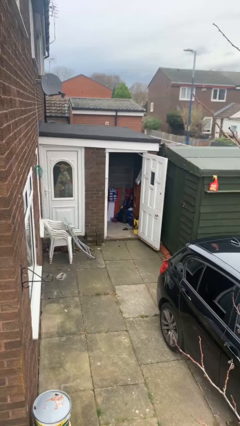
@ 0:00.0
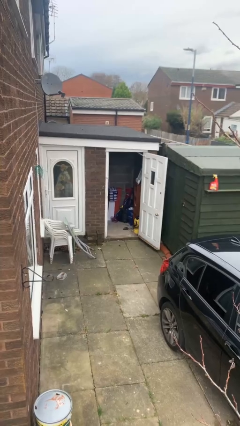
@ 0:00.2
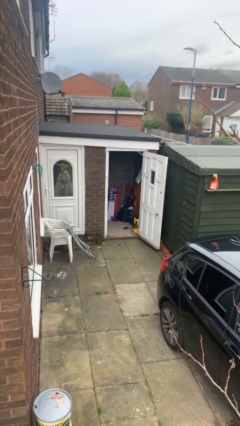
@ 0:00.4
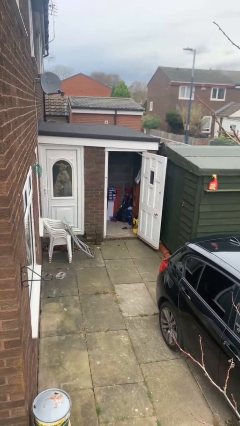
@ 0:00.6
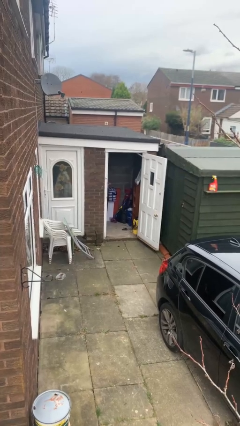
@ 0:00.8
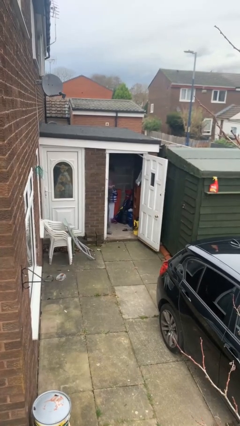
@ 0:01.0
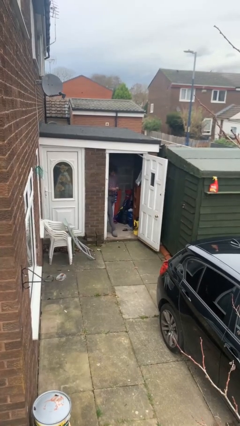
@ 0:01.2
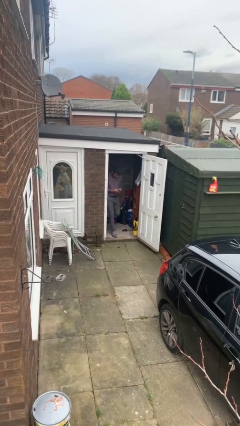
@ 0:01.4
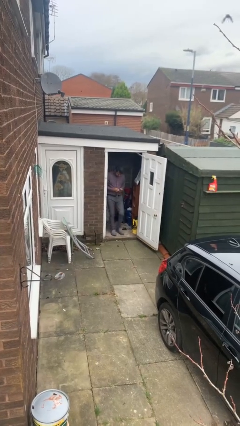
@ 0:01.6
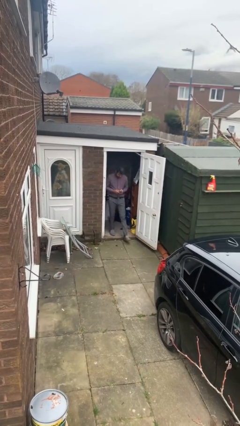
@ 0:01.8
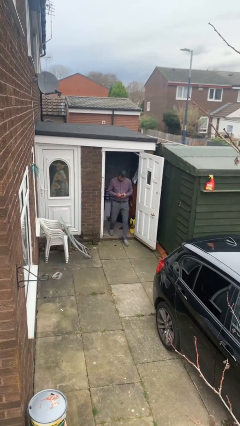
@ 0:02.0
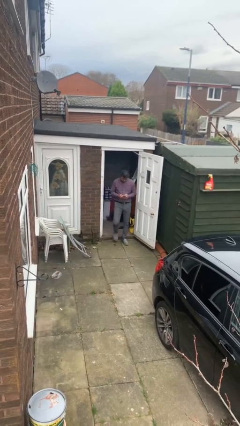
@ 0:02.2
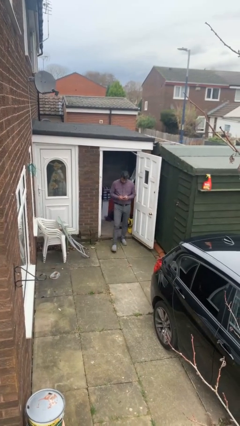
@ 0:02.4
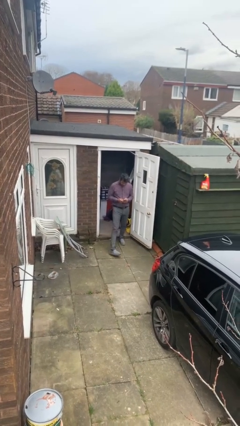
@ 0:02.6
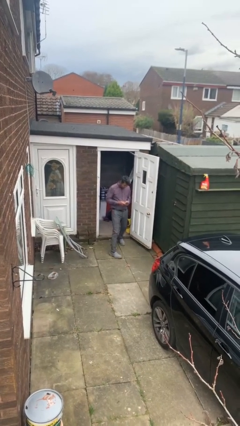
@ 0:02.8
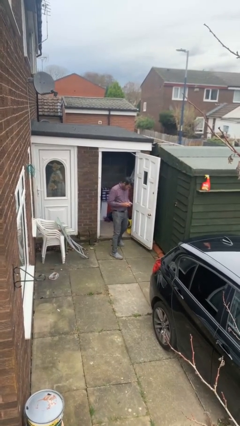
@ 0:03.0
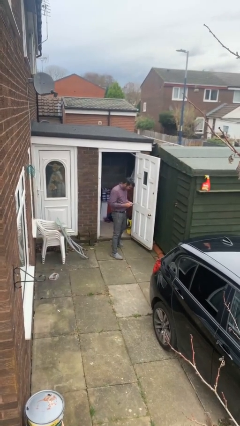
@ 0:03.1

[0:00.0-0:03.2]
person enters scene through structure

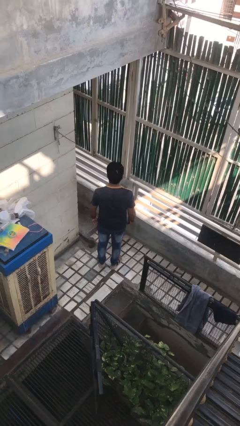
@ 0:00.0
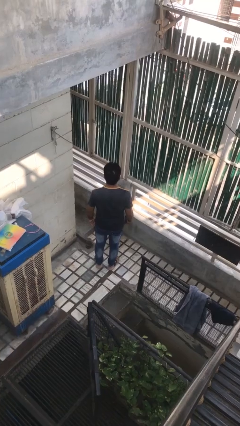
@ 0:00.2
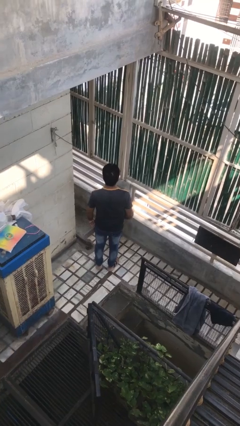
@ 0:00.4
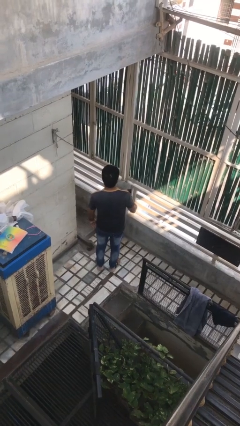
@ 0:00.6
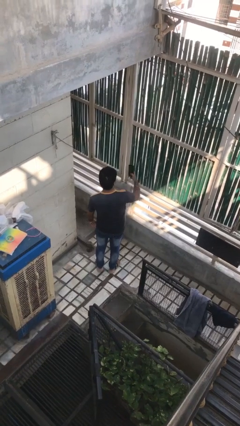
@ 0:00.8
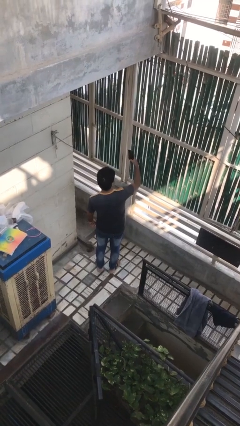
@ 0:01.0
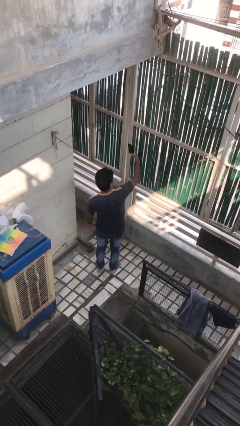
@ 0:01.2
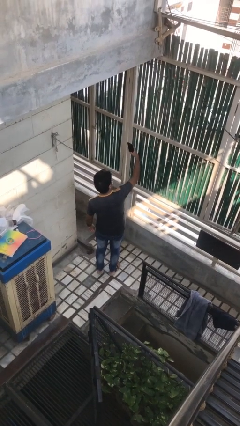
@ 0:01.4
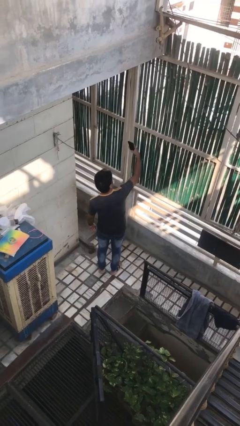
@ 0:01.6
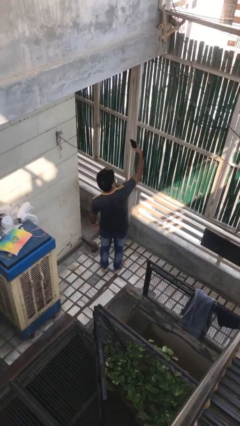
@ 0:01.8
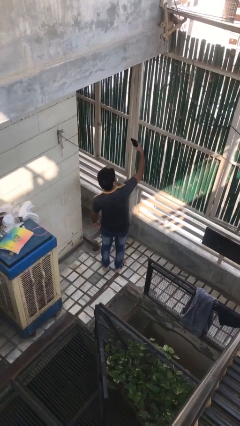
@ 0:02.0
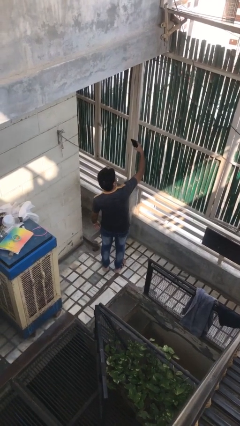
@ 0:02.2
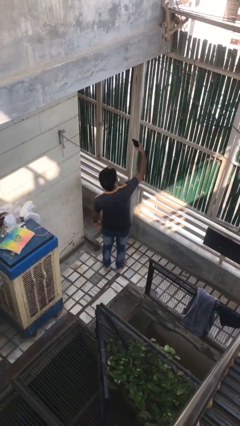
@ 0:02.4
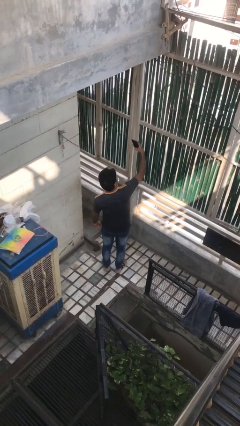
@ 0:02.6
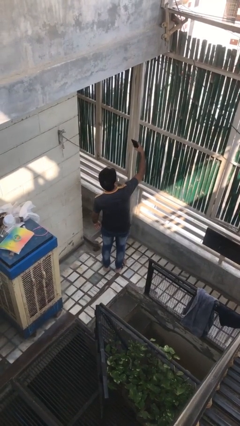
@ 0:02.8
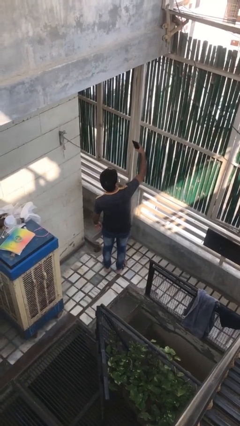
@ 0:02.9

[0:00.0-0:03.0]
person takes selfie

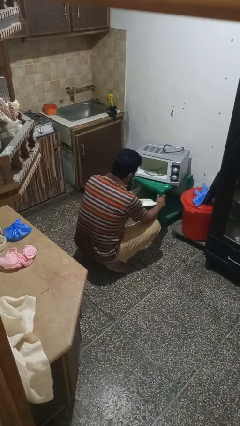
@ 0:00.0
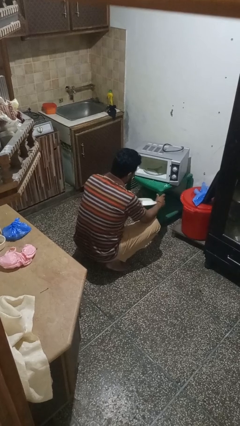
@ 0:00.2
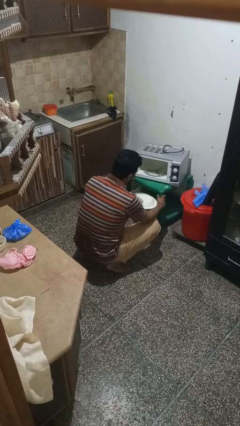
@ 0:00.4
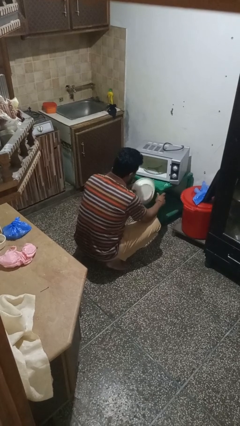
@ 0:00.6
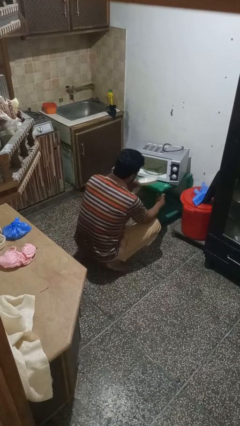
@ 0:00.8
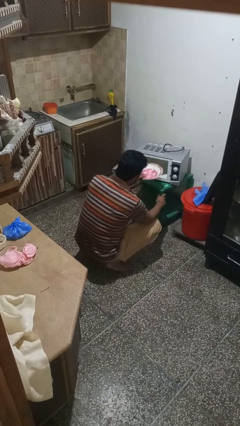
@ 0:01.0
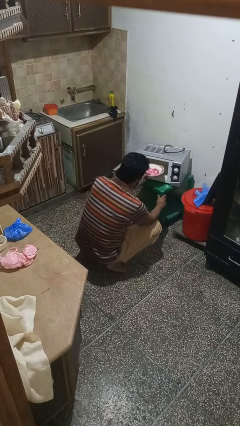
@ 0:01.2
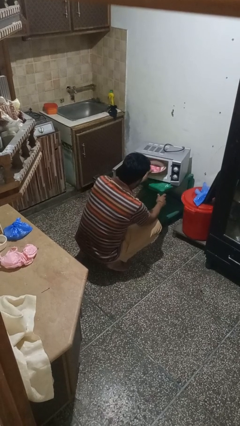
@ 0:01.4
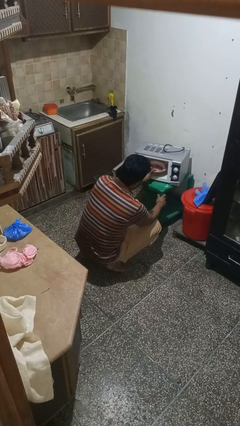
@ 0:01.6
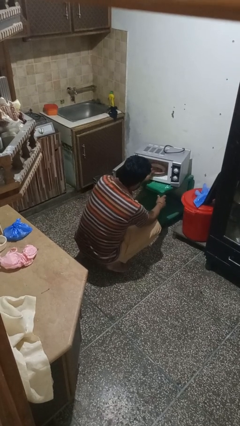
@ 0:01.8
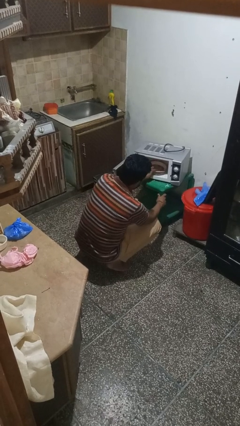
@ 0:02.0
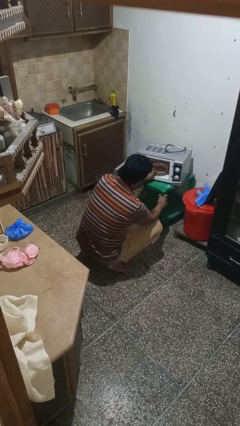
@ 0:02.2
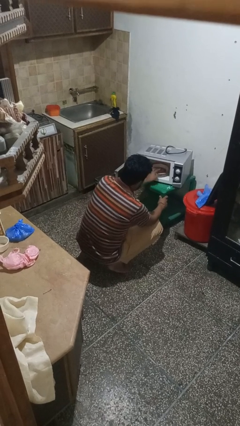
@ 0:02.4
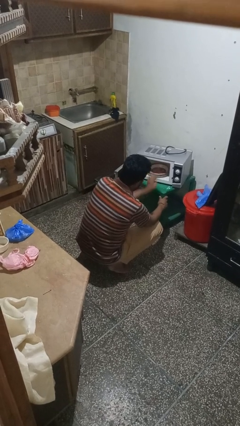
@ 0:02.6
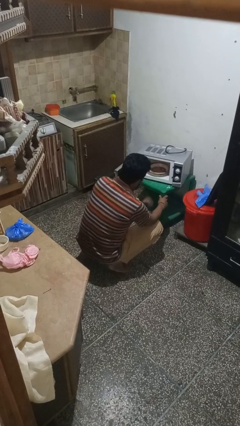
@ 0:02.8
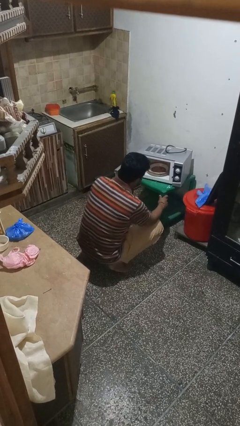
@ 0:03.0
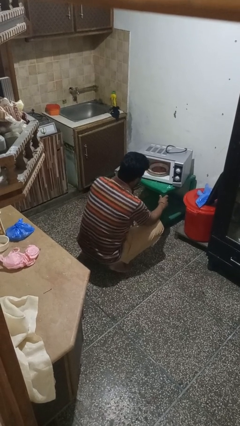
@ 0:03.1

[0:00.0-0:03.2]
person puts object into microwave

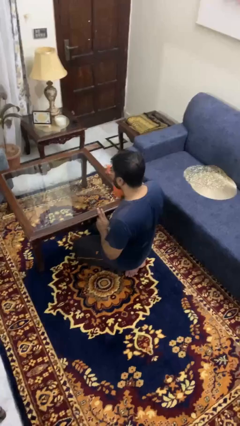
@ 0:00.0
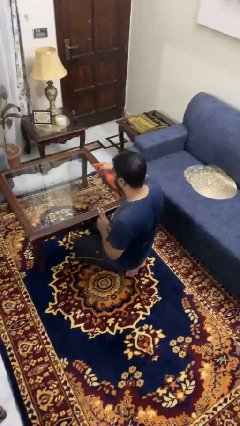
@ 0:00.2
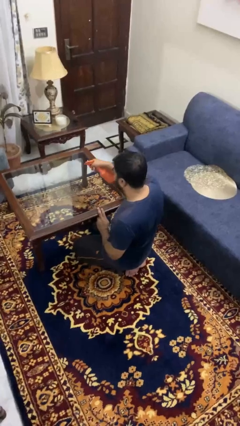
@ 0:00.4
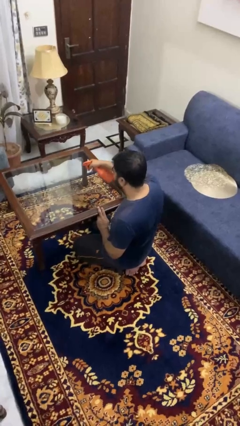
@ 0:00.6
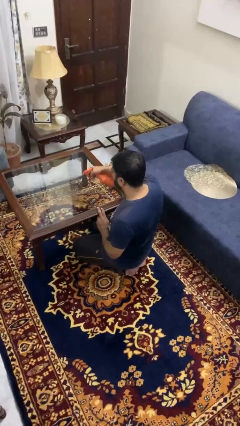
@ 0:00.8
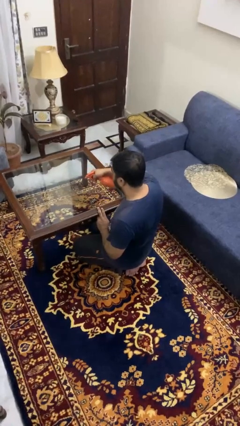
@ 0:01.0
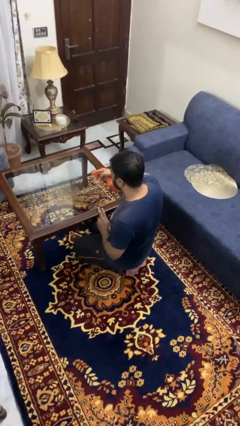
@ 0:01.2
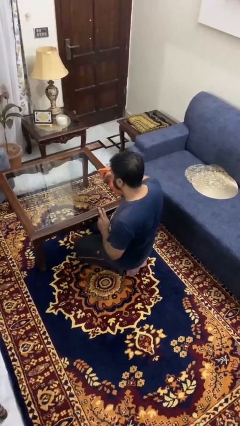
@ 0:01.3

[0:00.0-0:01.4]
person sprays from bottle

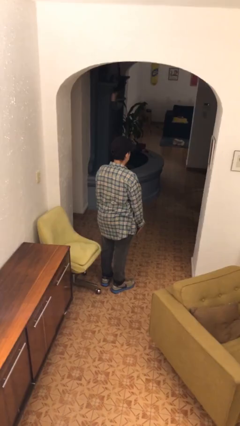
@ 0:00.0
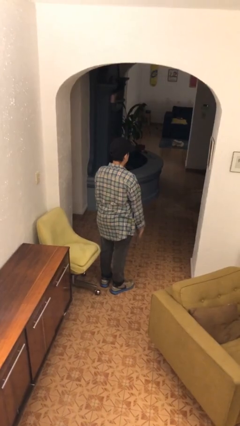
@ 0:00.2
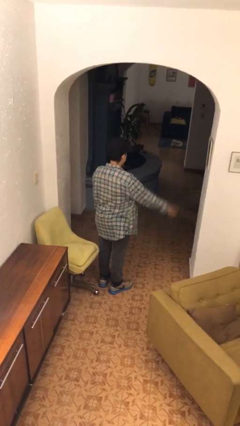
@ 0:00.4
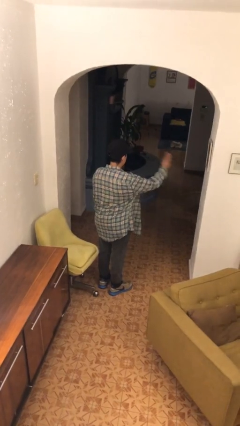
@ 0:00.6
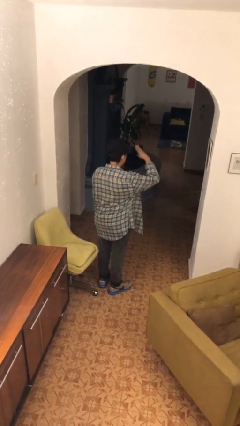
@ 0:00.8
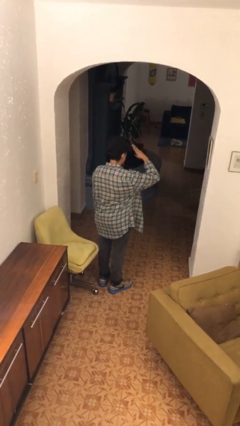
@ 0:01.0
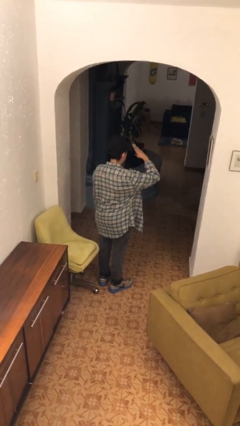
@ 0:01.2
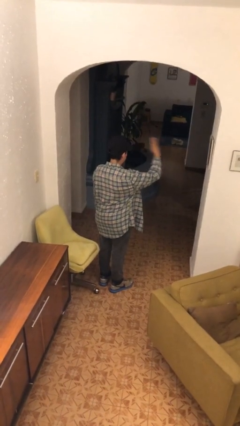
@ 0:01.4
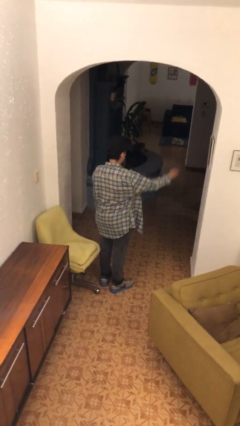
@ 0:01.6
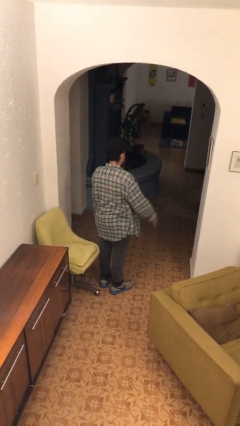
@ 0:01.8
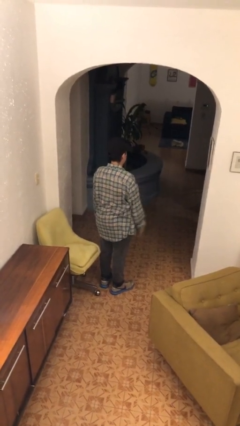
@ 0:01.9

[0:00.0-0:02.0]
person salutes

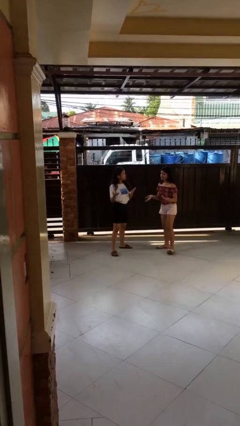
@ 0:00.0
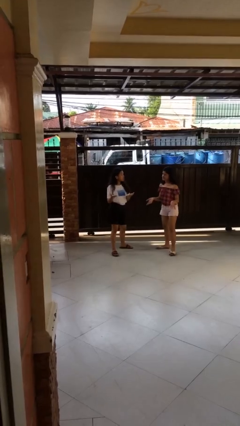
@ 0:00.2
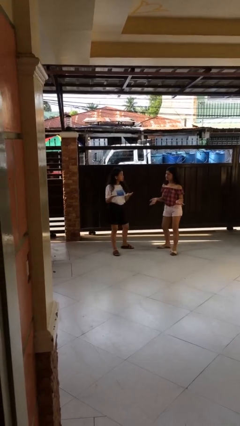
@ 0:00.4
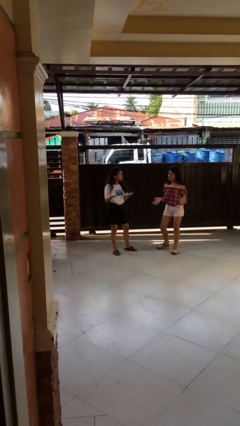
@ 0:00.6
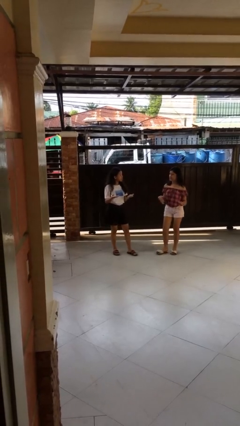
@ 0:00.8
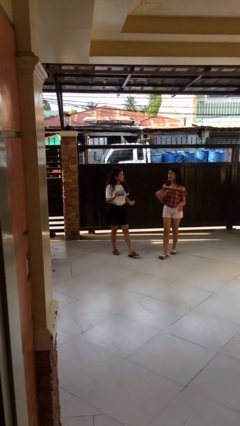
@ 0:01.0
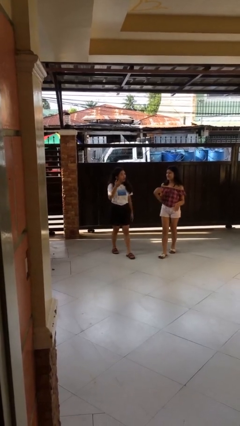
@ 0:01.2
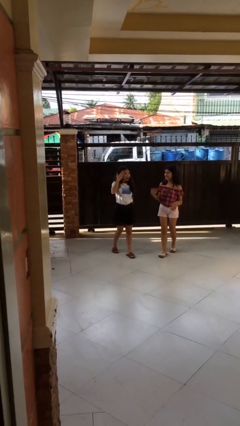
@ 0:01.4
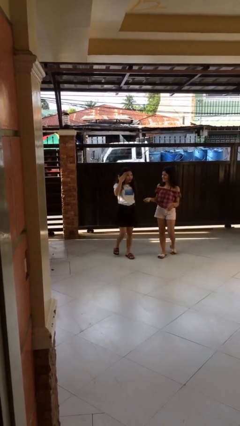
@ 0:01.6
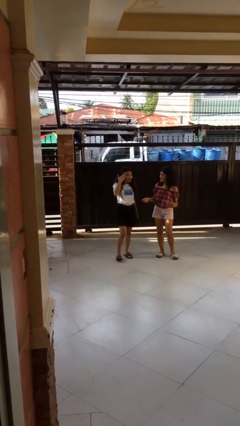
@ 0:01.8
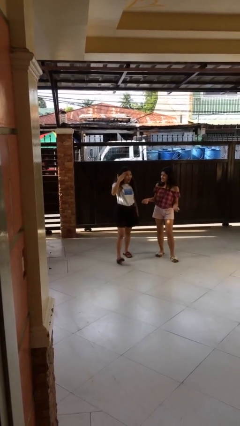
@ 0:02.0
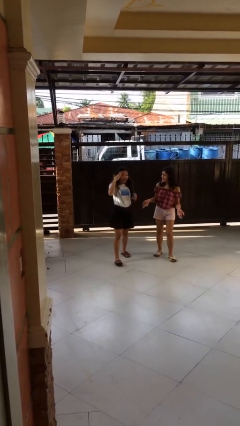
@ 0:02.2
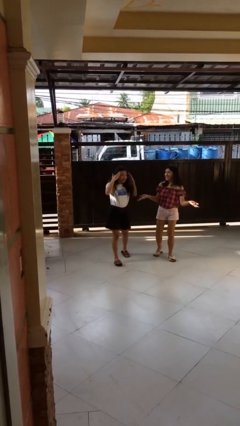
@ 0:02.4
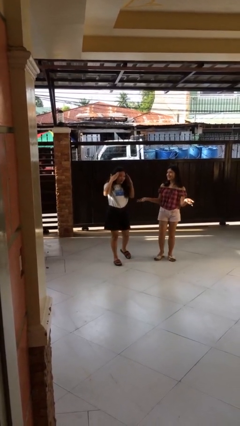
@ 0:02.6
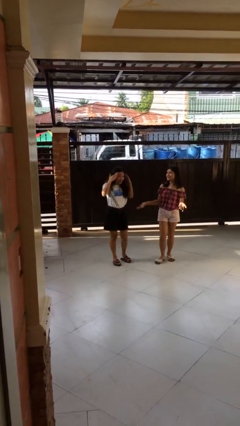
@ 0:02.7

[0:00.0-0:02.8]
person talks to person

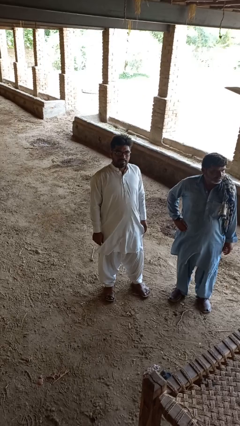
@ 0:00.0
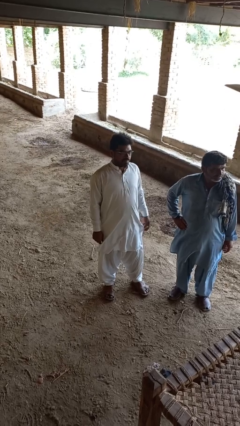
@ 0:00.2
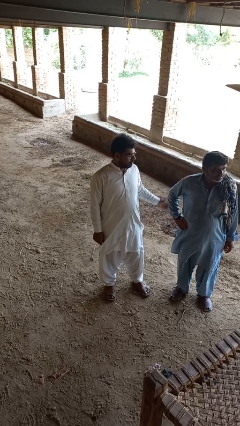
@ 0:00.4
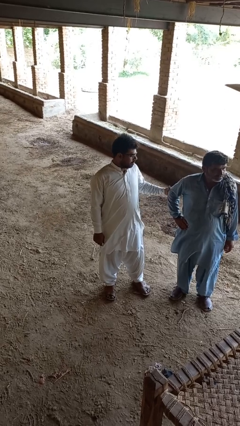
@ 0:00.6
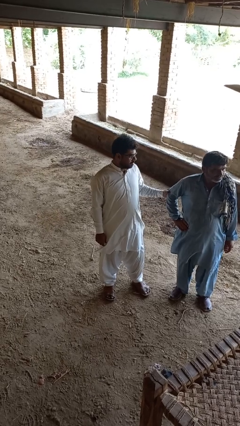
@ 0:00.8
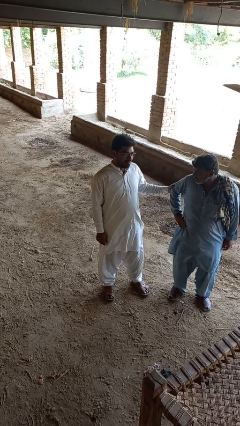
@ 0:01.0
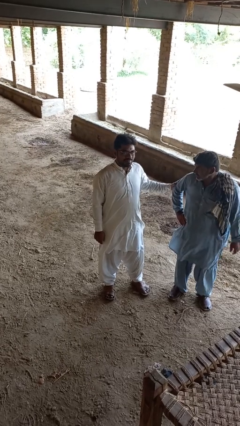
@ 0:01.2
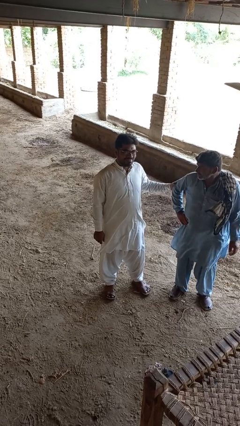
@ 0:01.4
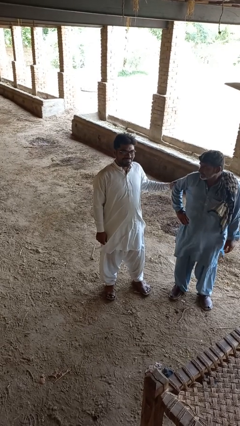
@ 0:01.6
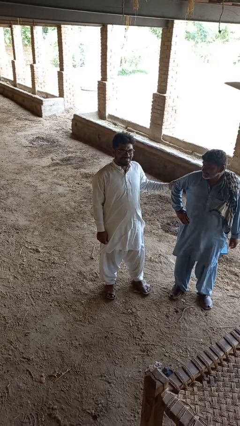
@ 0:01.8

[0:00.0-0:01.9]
person grabs person by forearm
